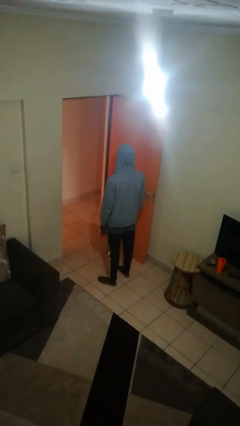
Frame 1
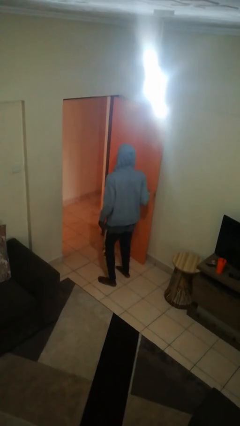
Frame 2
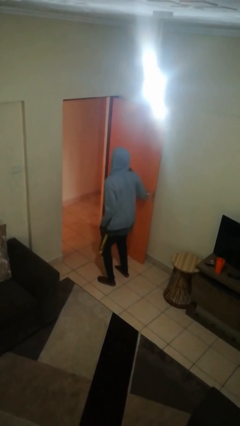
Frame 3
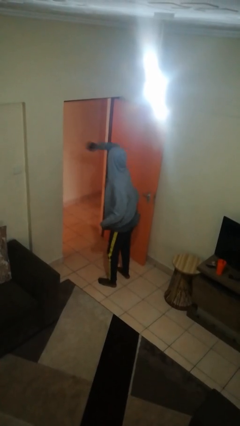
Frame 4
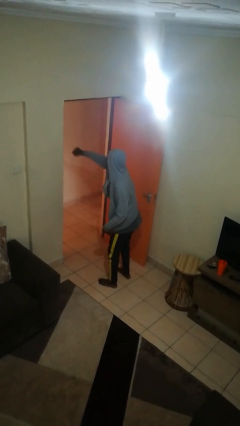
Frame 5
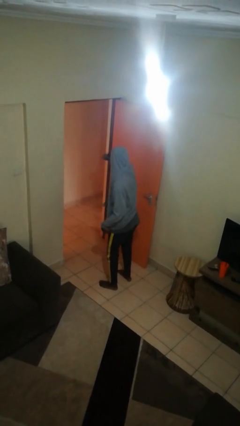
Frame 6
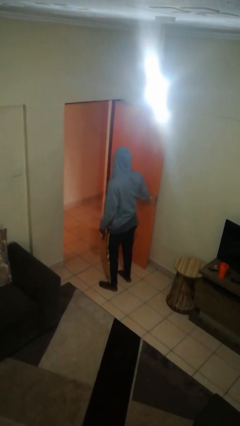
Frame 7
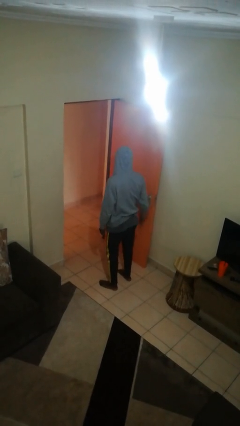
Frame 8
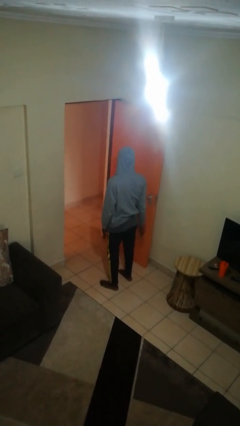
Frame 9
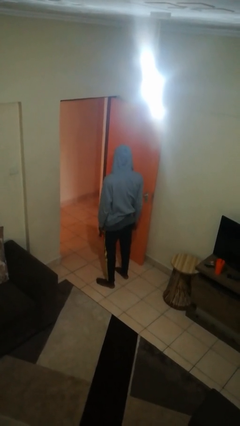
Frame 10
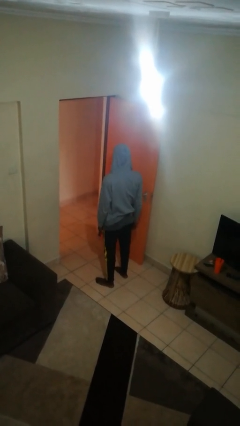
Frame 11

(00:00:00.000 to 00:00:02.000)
person punches

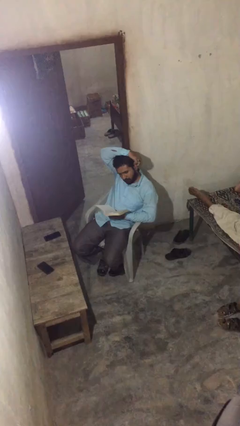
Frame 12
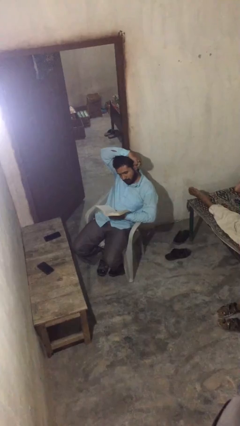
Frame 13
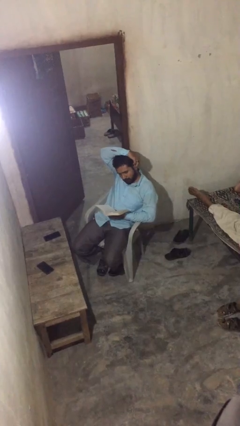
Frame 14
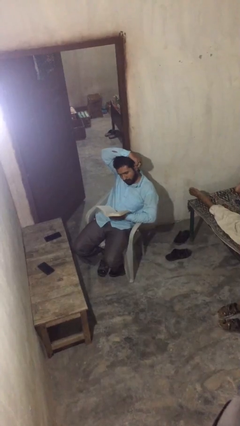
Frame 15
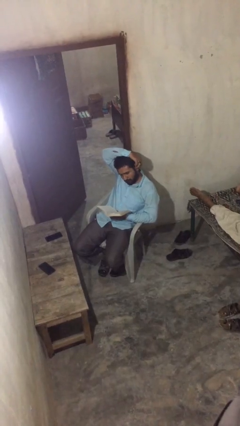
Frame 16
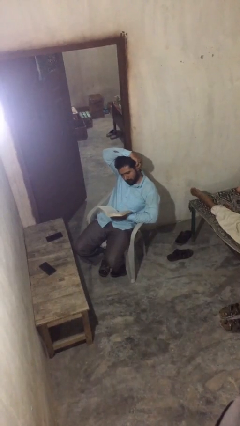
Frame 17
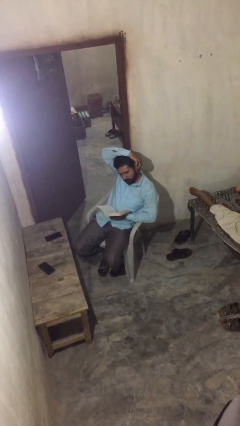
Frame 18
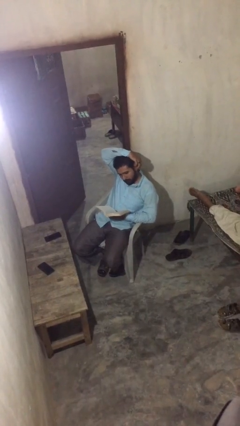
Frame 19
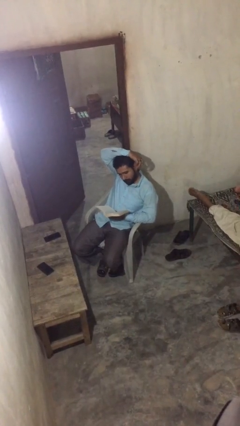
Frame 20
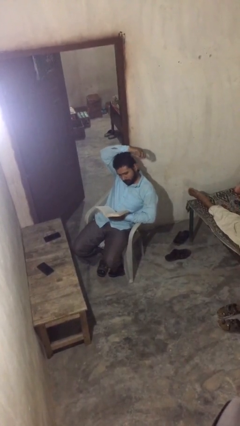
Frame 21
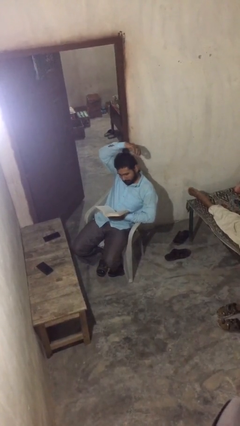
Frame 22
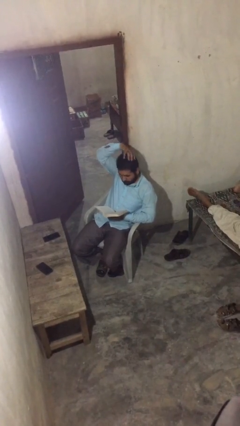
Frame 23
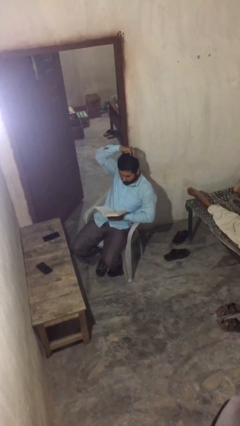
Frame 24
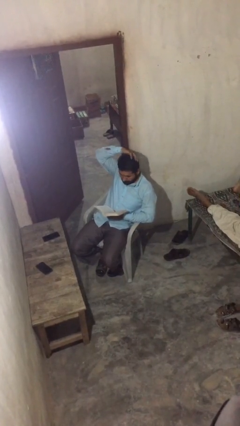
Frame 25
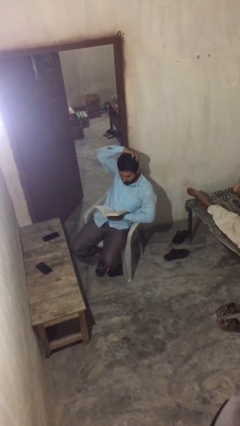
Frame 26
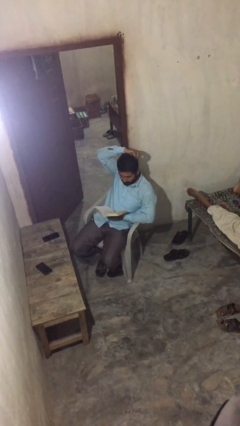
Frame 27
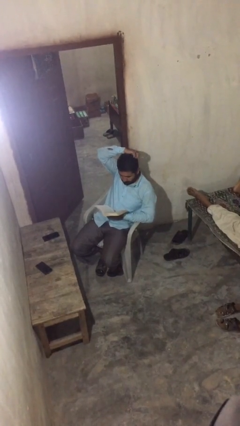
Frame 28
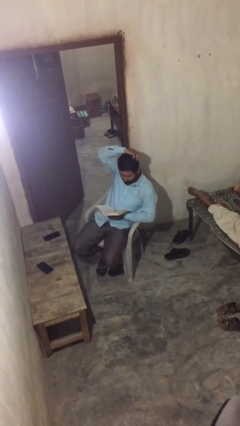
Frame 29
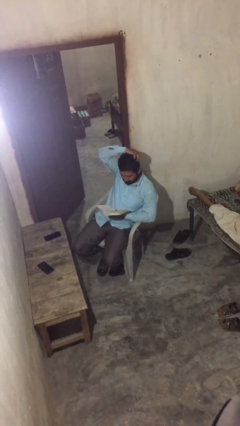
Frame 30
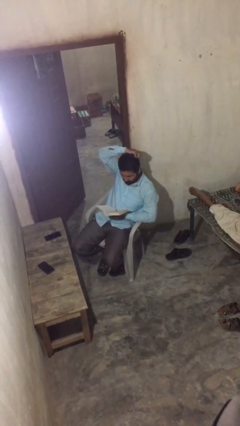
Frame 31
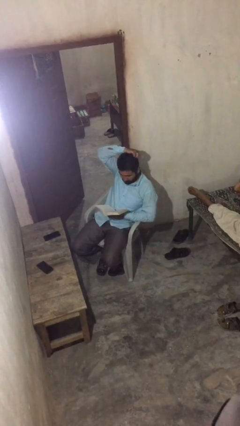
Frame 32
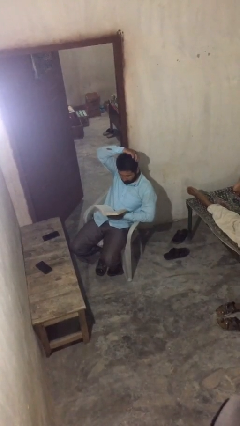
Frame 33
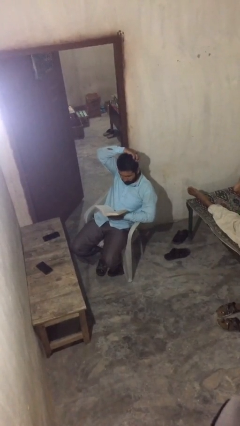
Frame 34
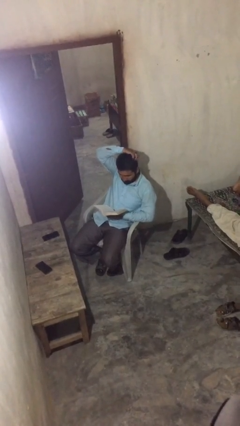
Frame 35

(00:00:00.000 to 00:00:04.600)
person reads document

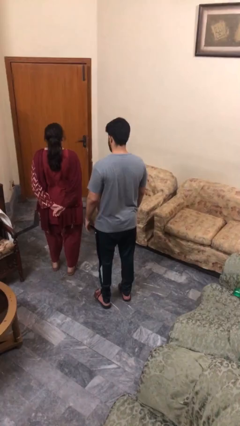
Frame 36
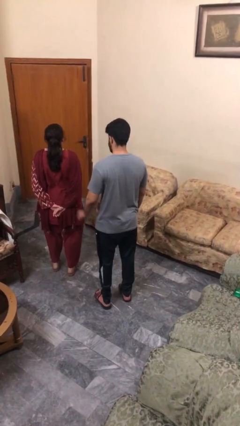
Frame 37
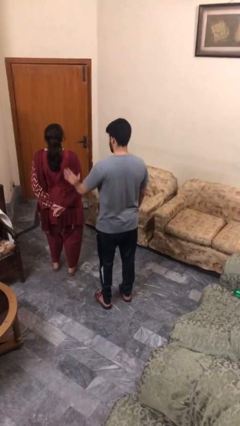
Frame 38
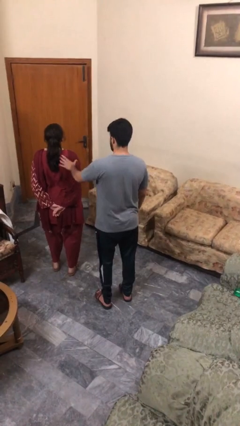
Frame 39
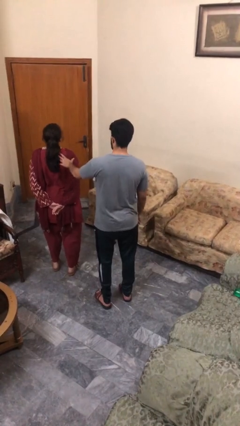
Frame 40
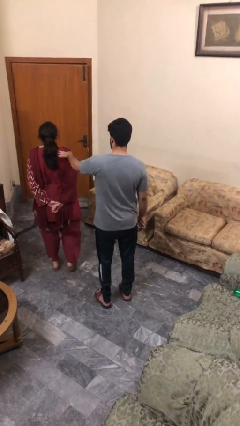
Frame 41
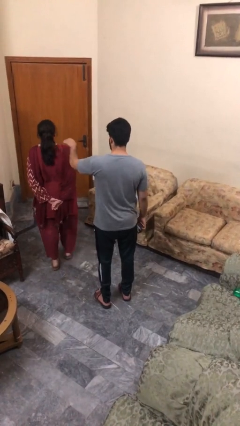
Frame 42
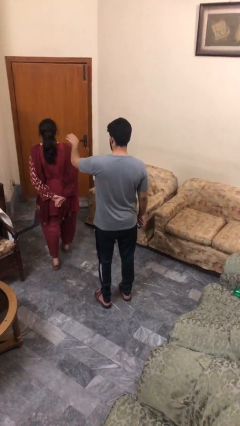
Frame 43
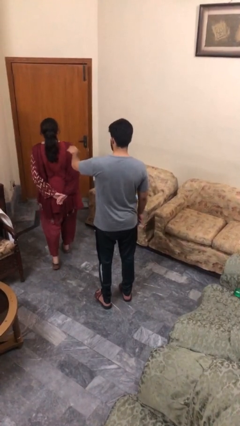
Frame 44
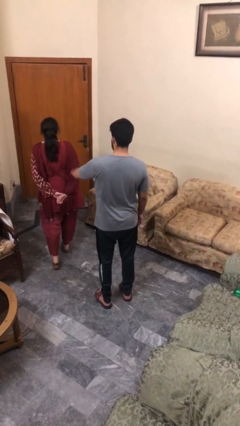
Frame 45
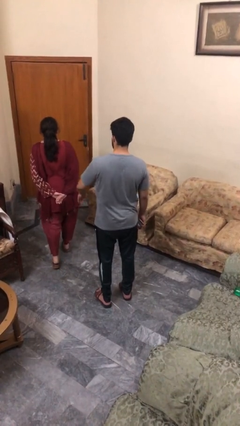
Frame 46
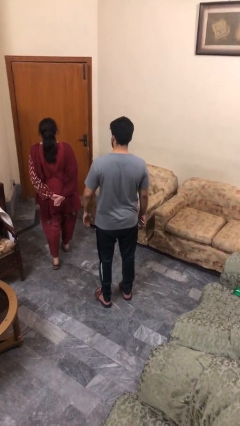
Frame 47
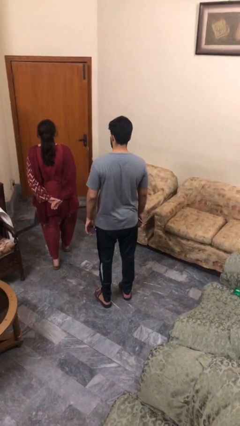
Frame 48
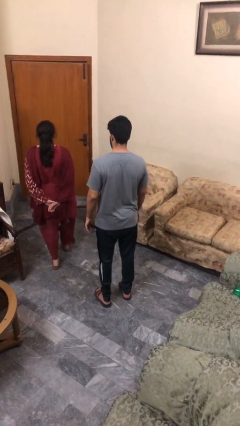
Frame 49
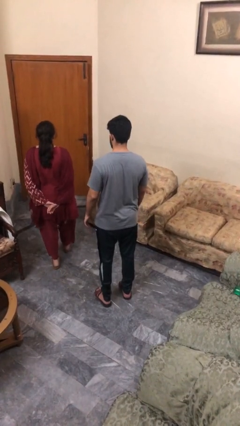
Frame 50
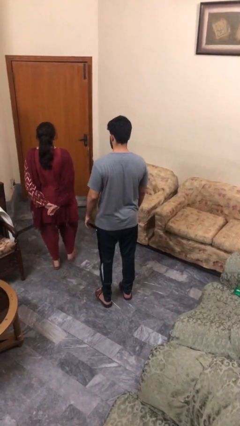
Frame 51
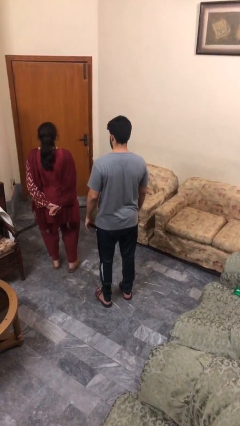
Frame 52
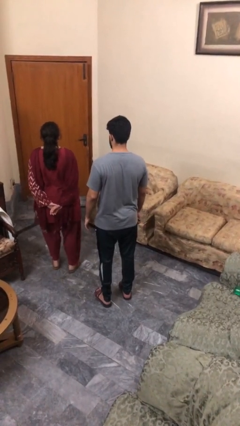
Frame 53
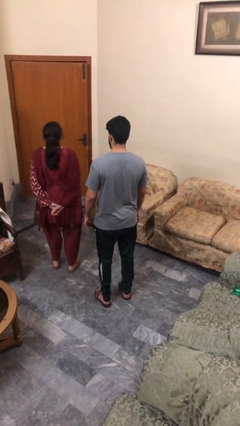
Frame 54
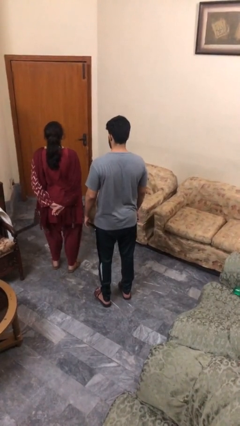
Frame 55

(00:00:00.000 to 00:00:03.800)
person shoves person

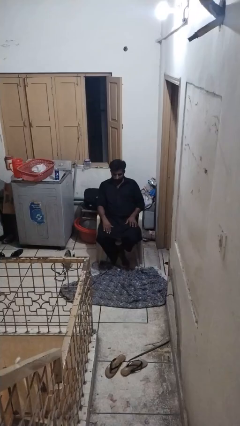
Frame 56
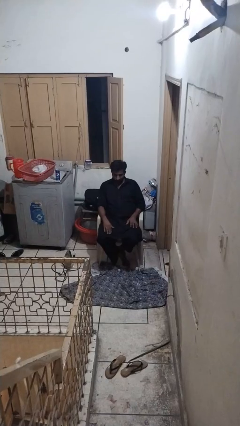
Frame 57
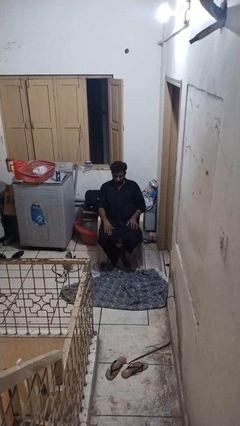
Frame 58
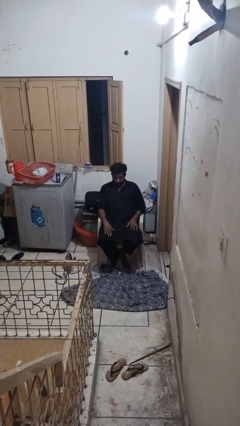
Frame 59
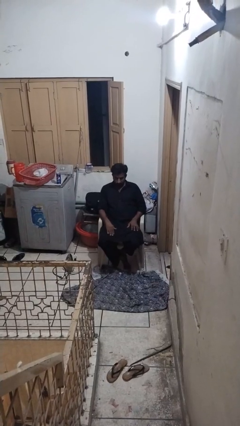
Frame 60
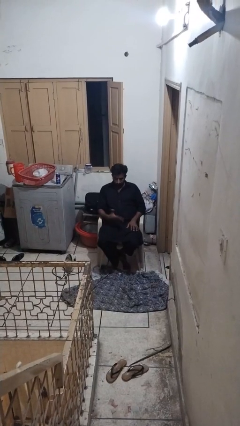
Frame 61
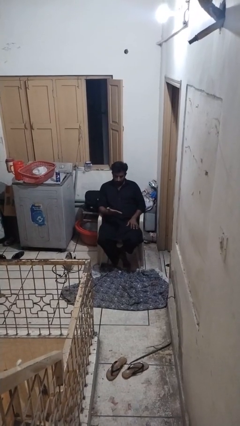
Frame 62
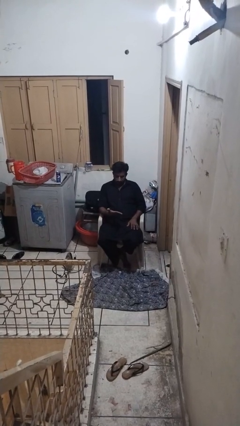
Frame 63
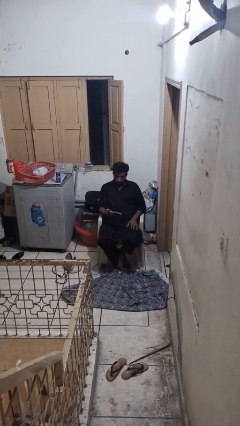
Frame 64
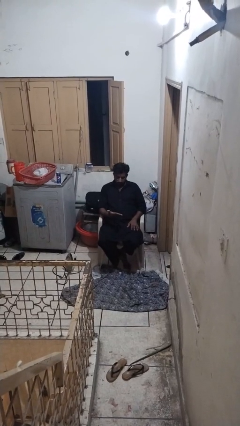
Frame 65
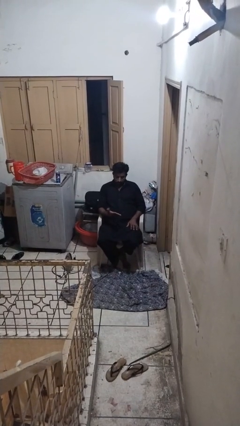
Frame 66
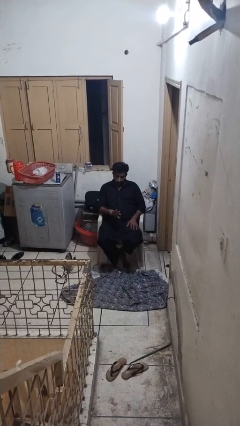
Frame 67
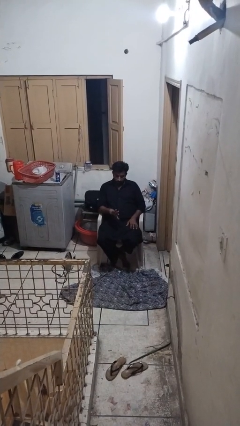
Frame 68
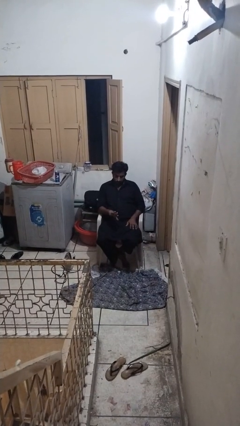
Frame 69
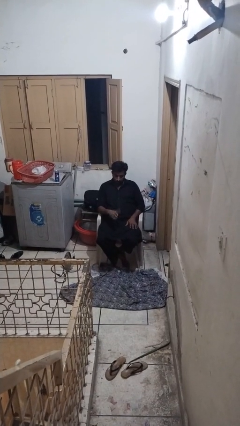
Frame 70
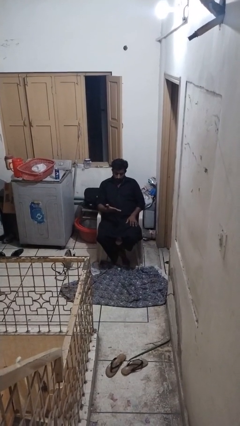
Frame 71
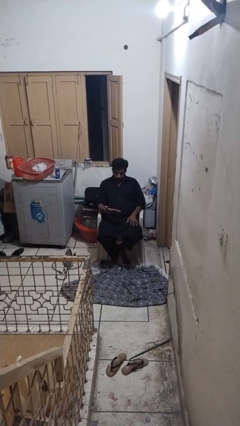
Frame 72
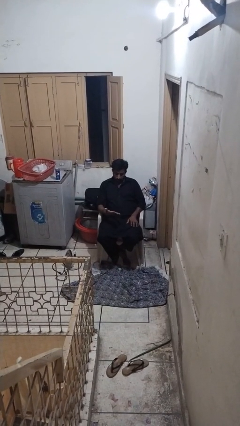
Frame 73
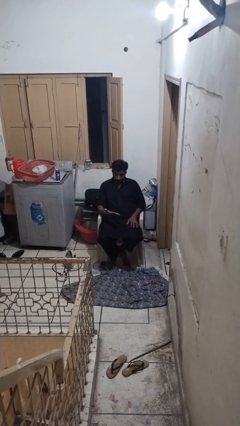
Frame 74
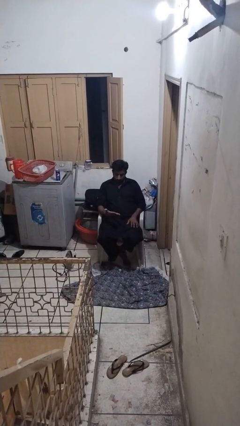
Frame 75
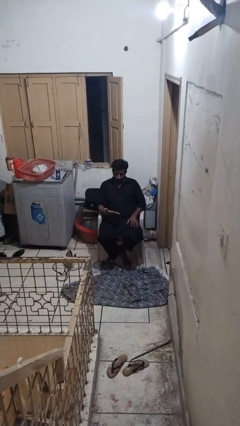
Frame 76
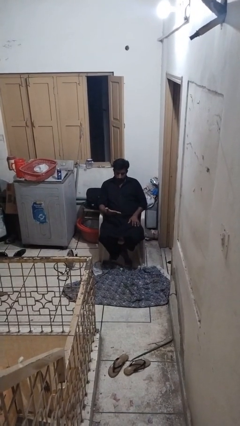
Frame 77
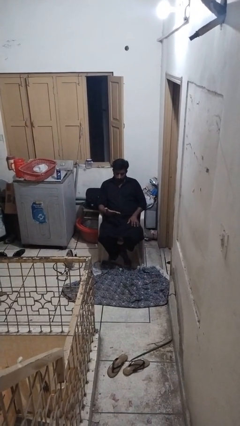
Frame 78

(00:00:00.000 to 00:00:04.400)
person looks at hands in lap

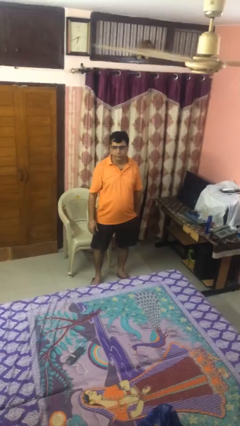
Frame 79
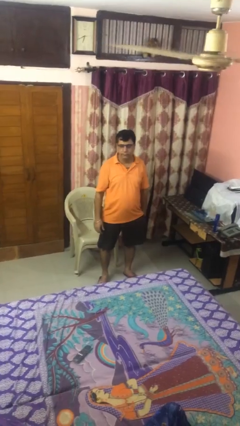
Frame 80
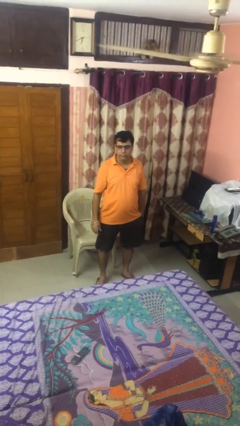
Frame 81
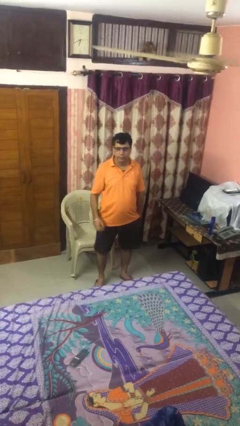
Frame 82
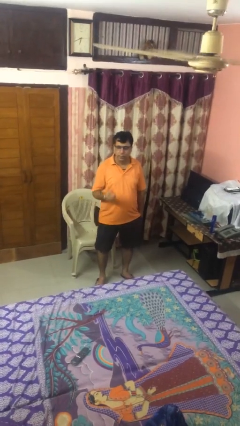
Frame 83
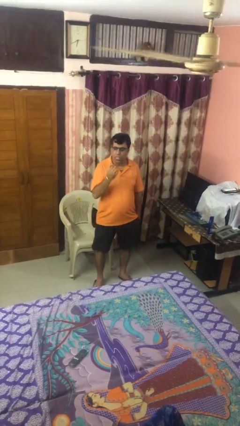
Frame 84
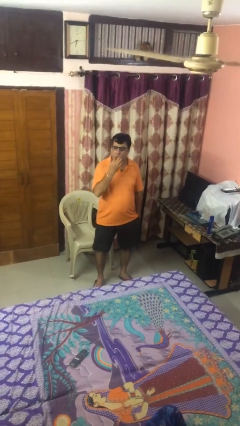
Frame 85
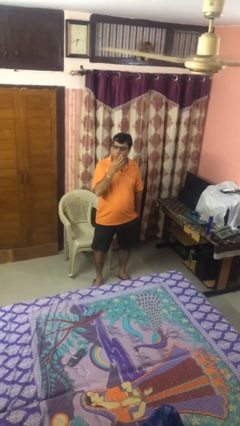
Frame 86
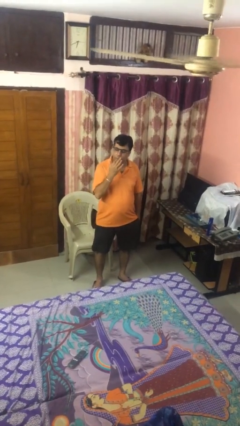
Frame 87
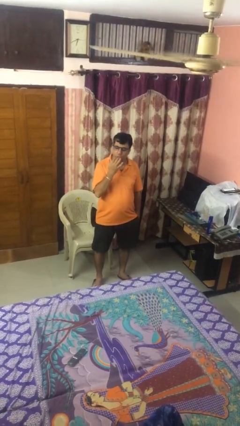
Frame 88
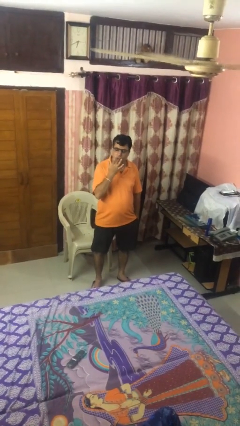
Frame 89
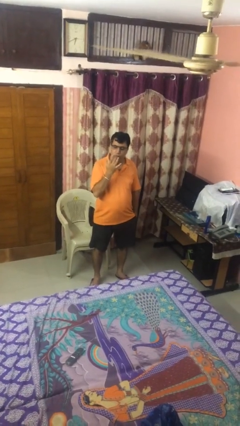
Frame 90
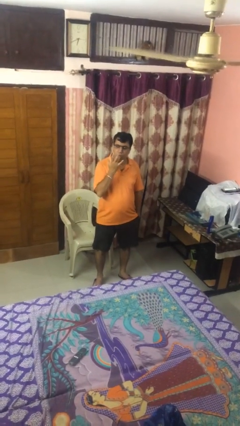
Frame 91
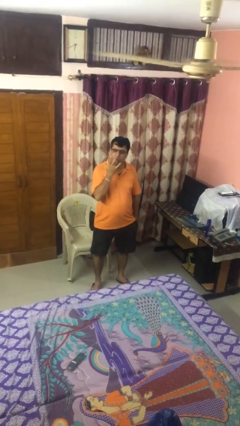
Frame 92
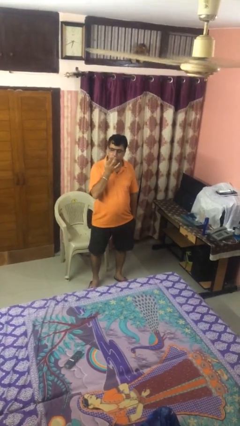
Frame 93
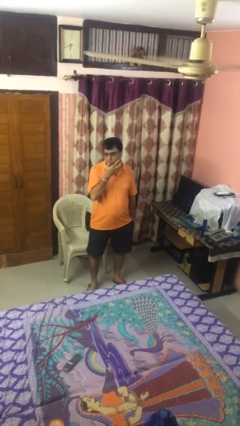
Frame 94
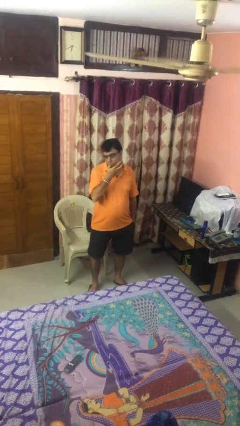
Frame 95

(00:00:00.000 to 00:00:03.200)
person licks fingers
